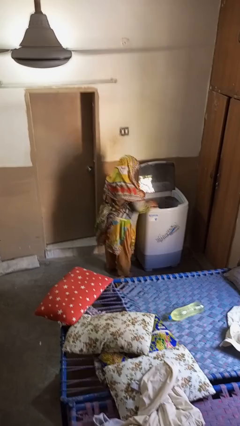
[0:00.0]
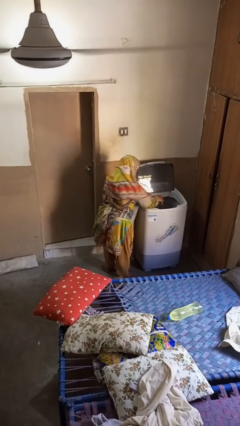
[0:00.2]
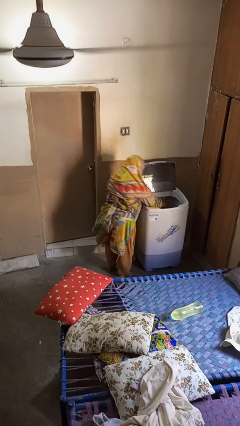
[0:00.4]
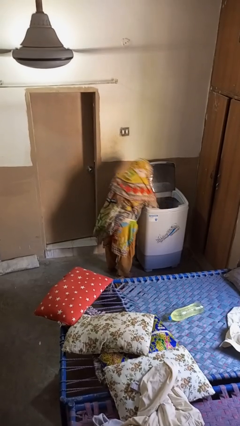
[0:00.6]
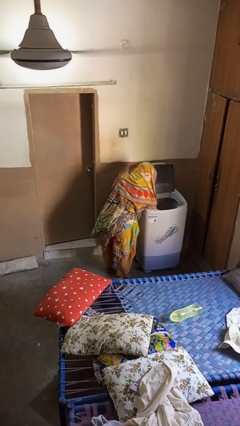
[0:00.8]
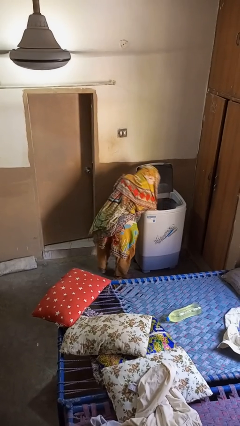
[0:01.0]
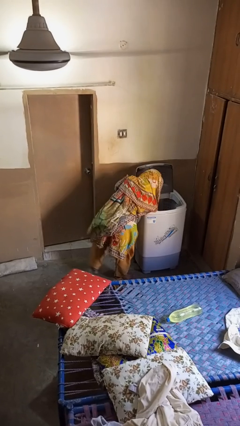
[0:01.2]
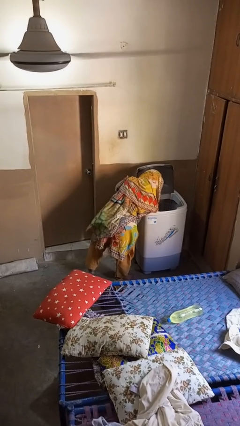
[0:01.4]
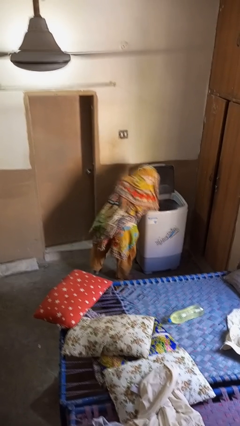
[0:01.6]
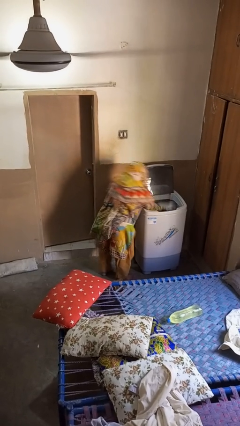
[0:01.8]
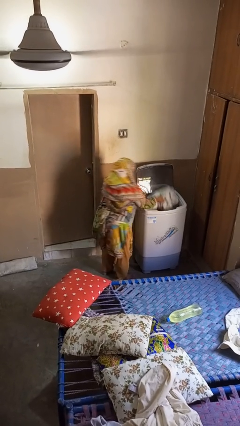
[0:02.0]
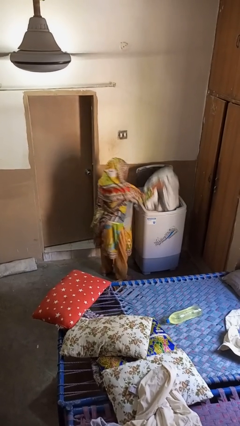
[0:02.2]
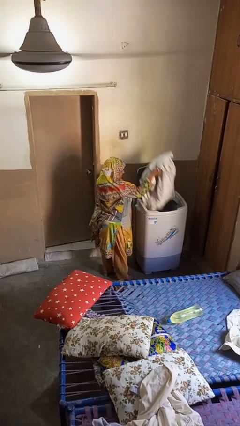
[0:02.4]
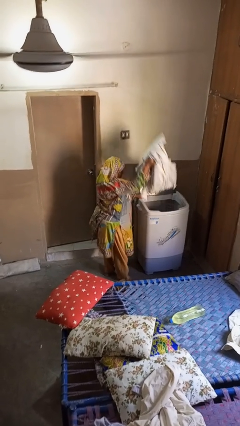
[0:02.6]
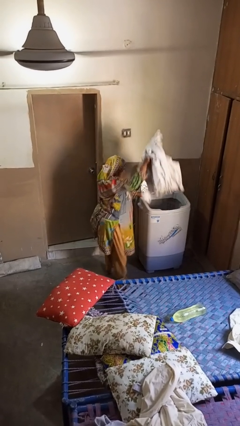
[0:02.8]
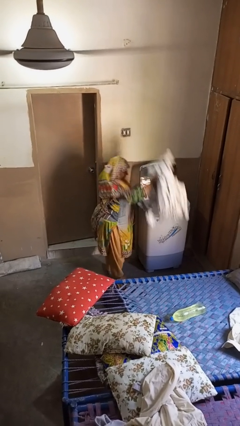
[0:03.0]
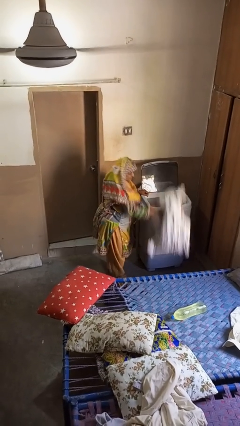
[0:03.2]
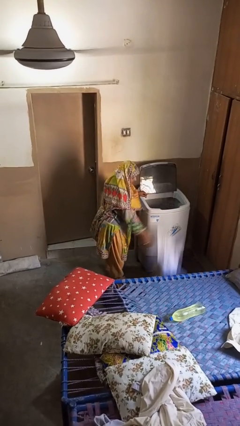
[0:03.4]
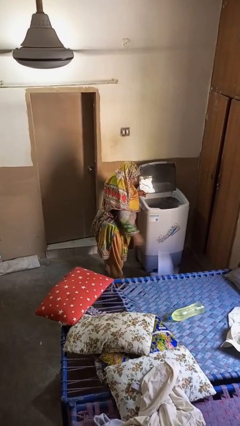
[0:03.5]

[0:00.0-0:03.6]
person unloads clotheswasher

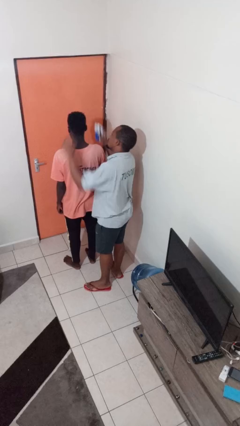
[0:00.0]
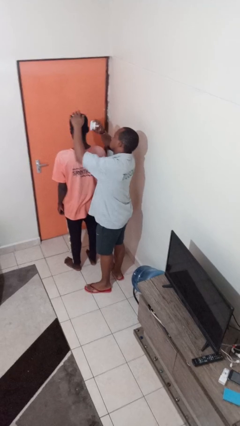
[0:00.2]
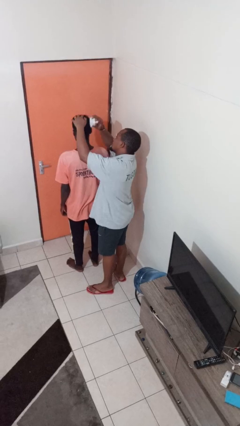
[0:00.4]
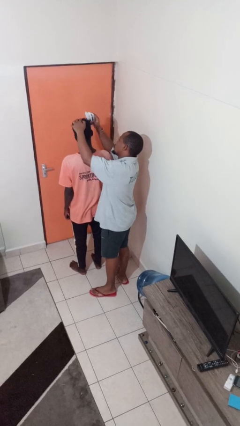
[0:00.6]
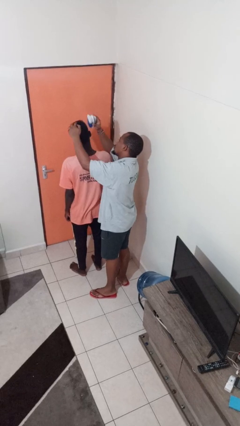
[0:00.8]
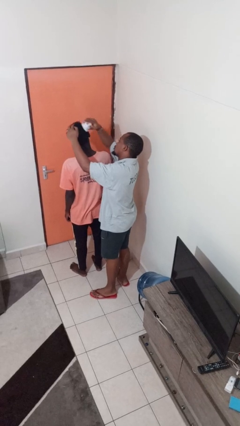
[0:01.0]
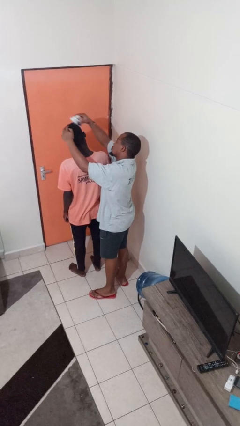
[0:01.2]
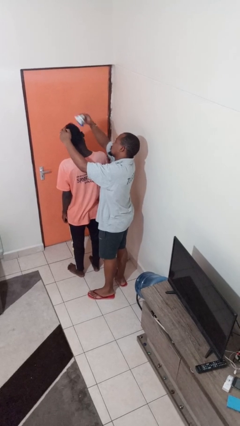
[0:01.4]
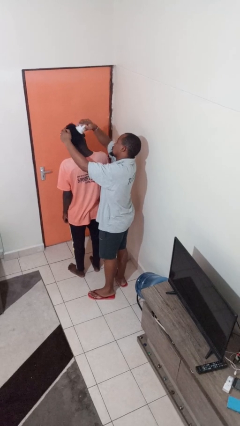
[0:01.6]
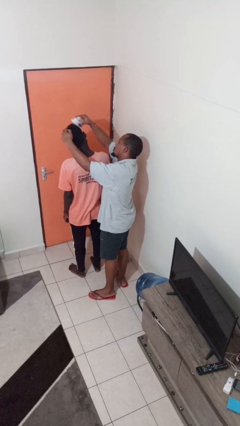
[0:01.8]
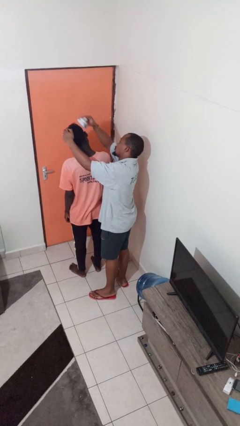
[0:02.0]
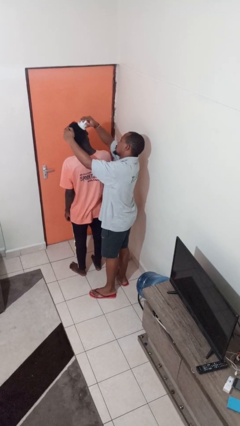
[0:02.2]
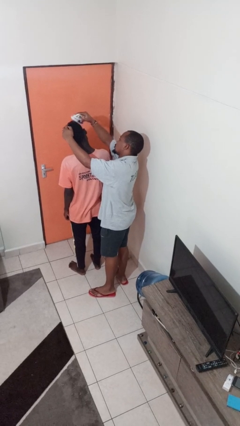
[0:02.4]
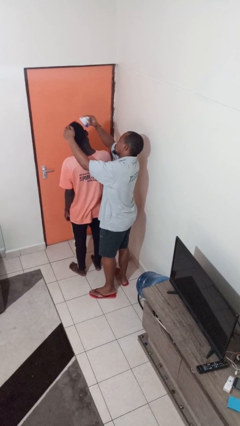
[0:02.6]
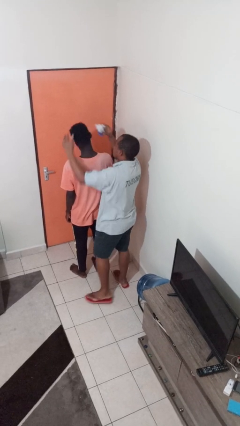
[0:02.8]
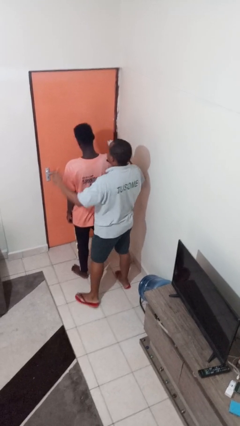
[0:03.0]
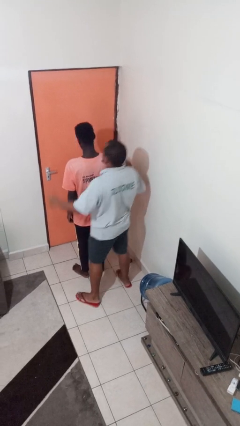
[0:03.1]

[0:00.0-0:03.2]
person brushes hair of person

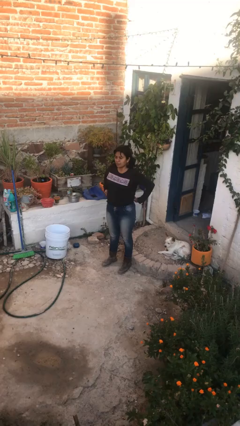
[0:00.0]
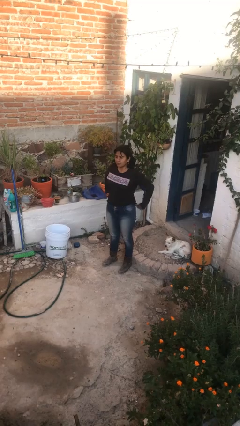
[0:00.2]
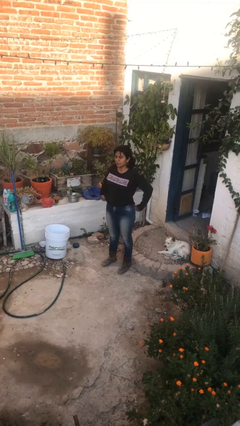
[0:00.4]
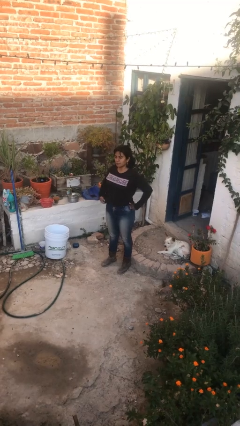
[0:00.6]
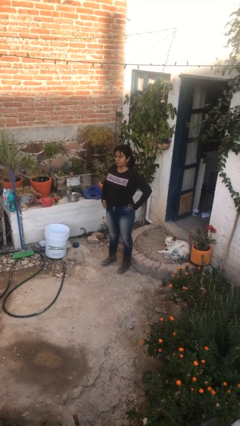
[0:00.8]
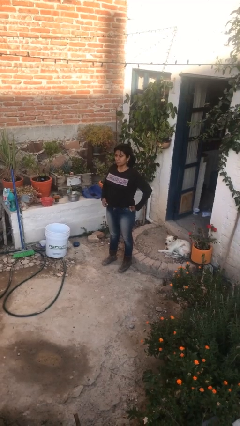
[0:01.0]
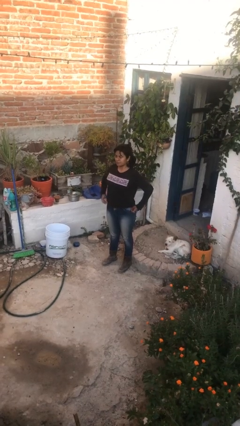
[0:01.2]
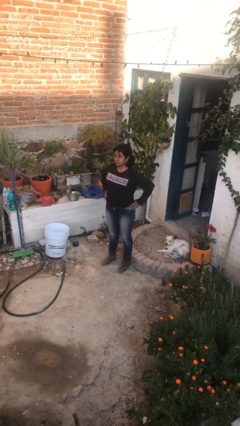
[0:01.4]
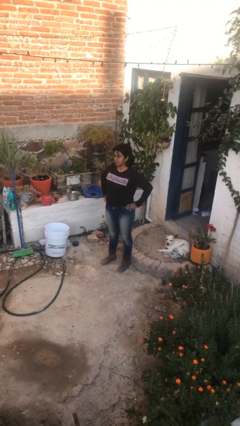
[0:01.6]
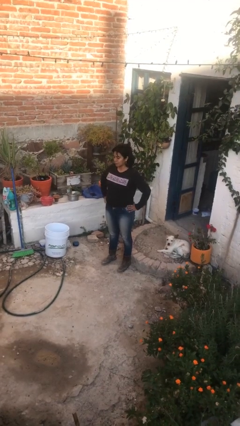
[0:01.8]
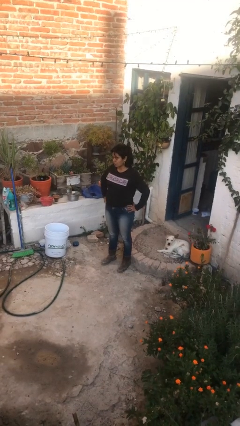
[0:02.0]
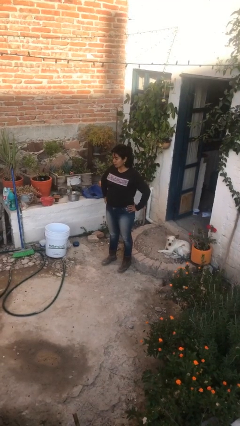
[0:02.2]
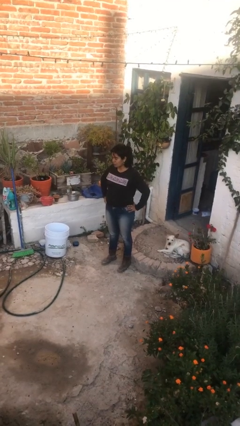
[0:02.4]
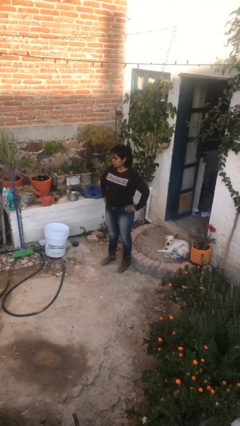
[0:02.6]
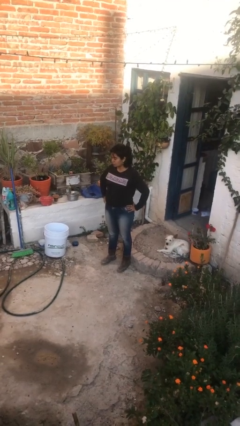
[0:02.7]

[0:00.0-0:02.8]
person stands up

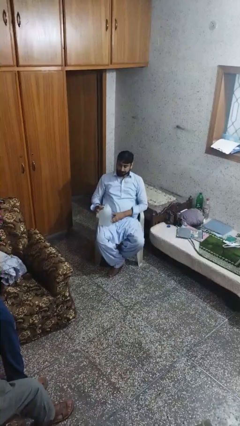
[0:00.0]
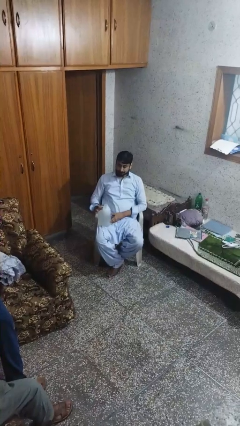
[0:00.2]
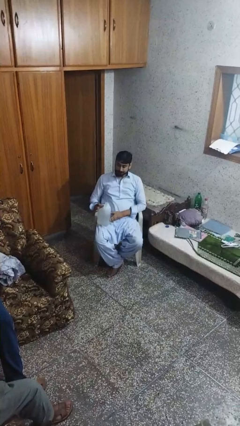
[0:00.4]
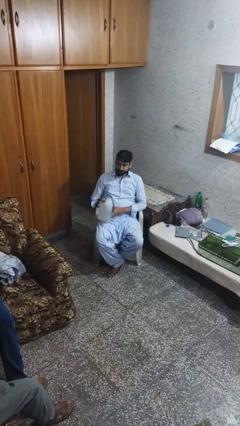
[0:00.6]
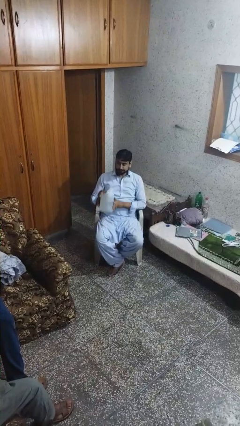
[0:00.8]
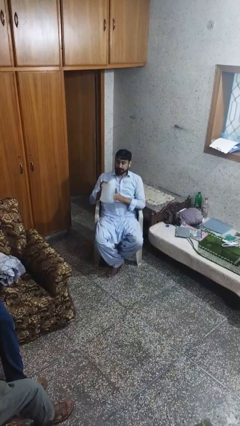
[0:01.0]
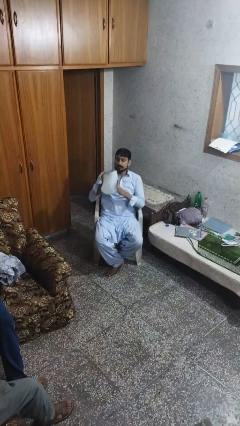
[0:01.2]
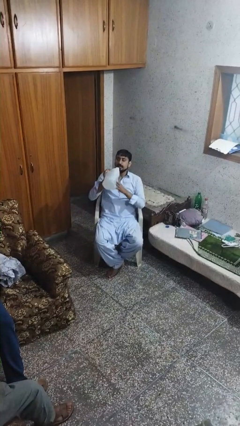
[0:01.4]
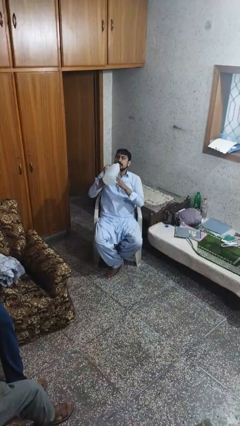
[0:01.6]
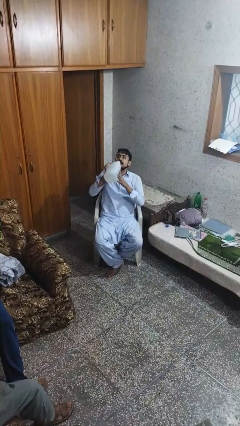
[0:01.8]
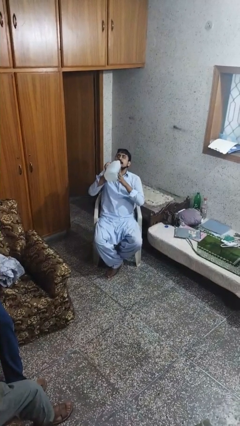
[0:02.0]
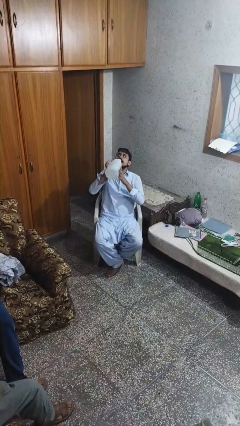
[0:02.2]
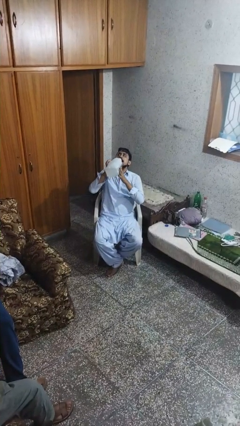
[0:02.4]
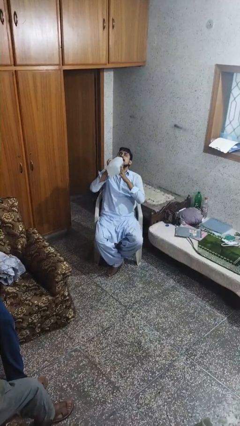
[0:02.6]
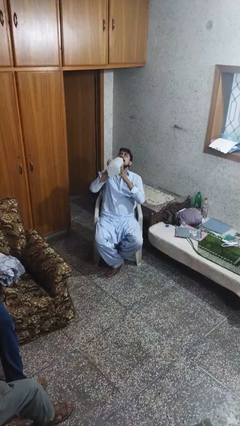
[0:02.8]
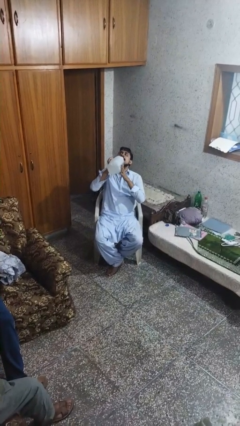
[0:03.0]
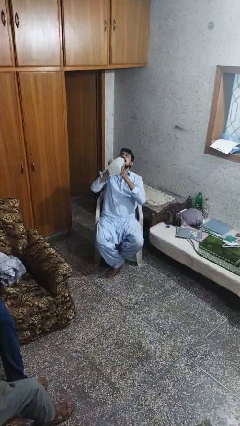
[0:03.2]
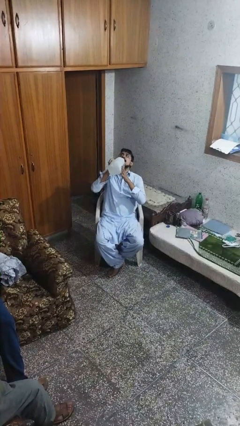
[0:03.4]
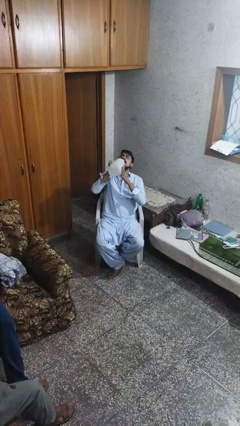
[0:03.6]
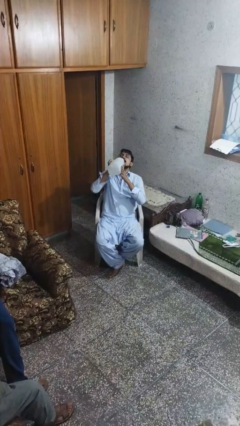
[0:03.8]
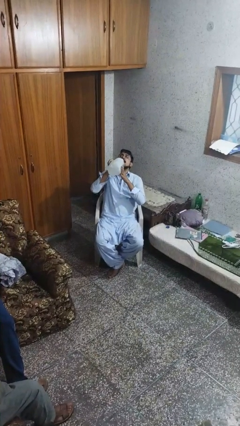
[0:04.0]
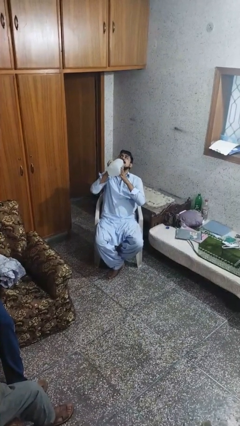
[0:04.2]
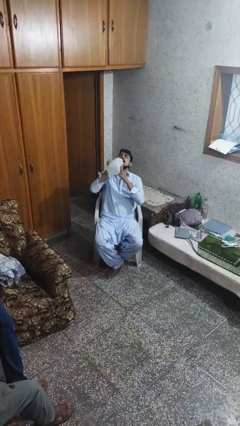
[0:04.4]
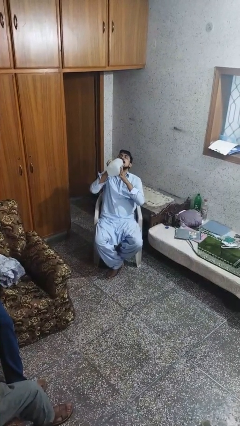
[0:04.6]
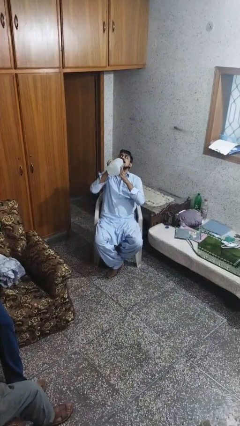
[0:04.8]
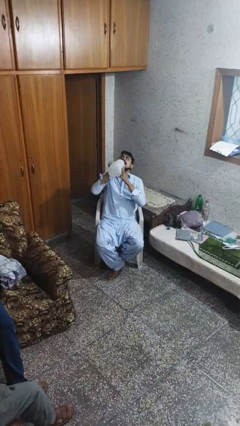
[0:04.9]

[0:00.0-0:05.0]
person drinks from bottle

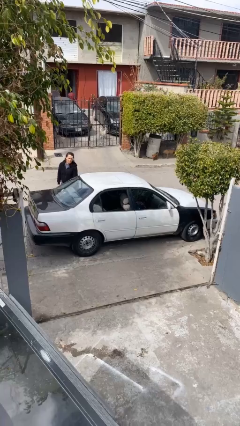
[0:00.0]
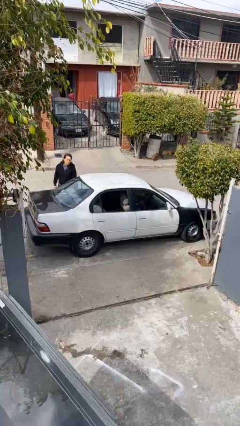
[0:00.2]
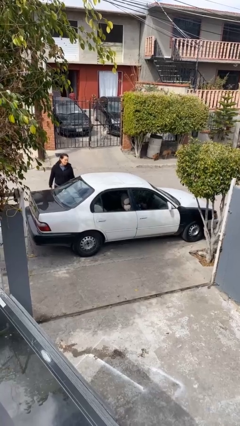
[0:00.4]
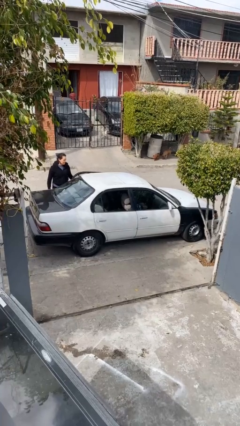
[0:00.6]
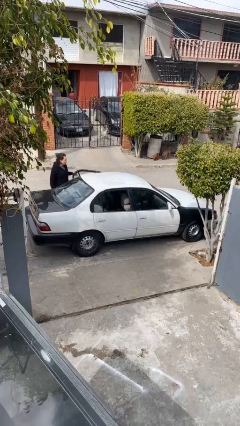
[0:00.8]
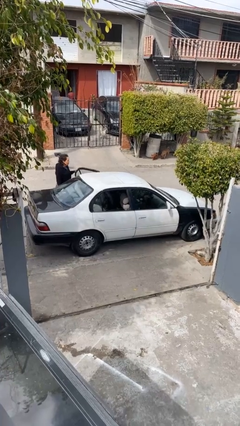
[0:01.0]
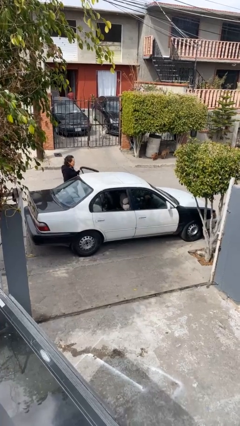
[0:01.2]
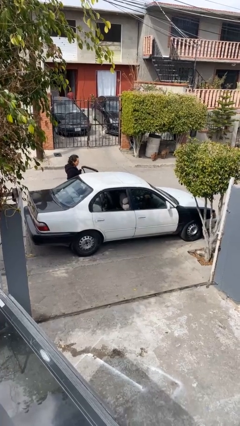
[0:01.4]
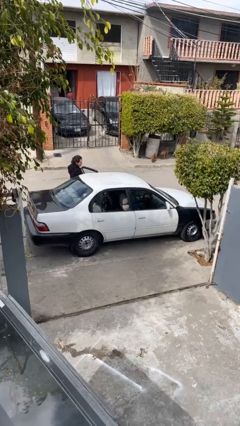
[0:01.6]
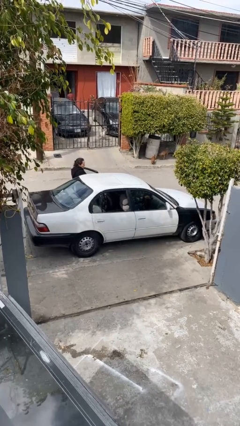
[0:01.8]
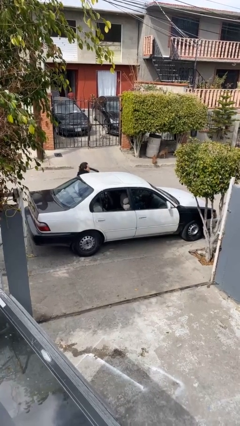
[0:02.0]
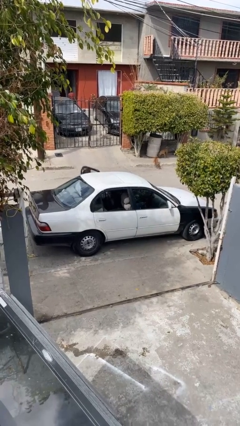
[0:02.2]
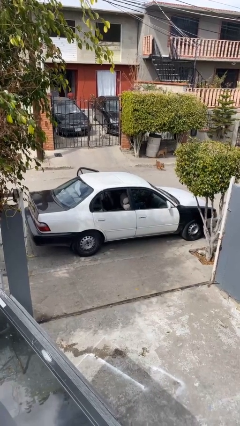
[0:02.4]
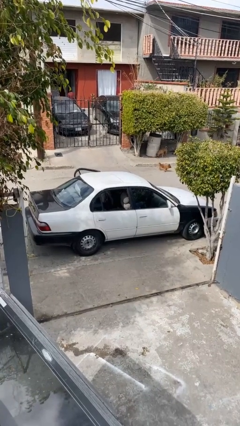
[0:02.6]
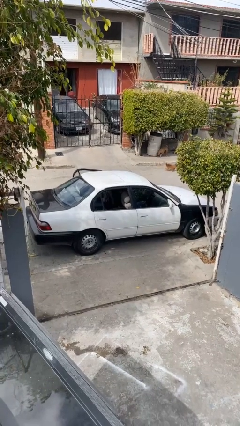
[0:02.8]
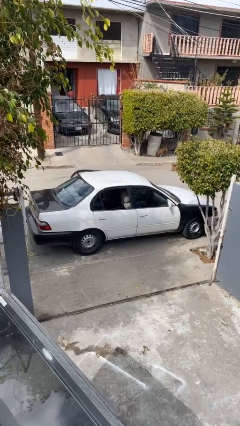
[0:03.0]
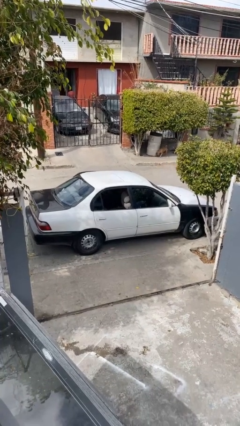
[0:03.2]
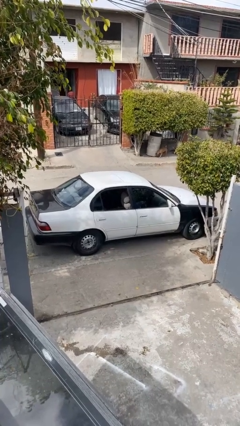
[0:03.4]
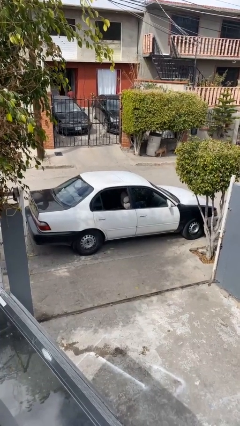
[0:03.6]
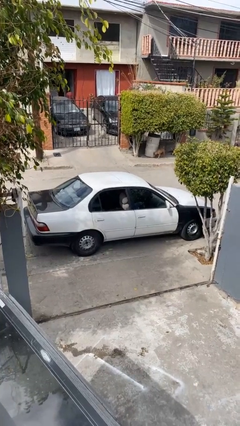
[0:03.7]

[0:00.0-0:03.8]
car picks up person
